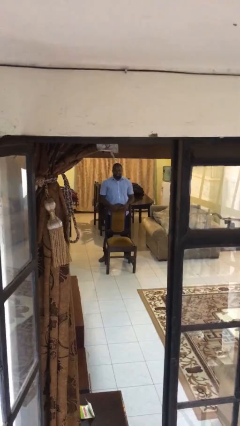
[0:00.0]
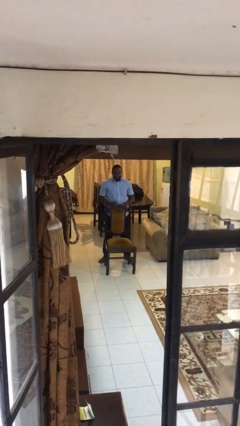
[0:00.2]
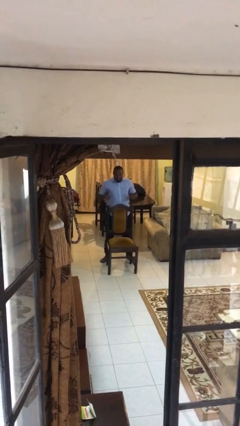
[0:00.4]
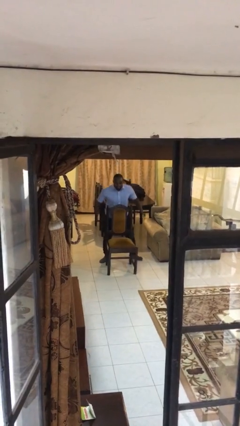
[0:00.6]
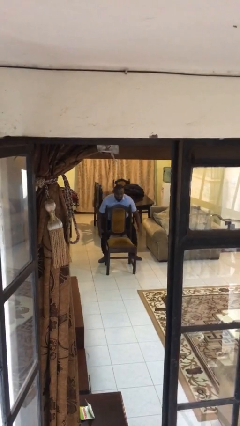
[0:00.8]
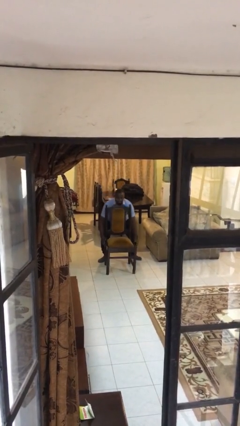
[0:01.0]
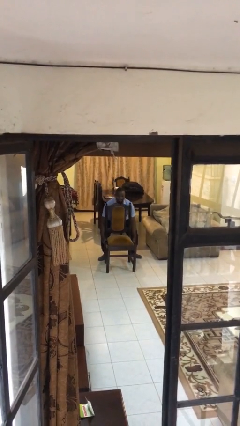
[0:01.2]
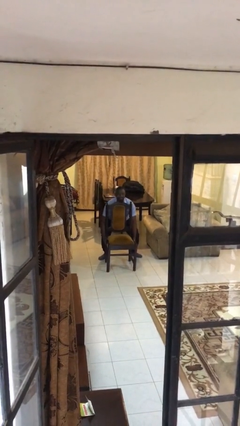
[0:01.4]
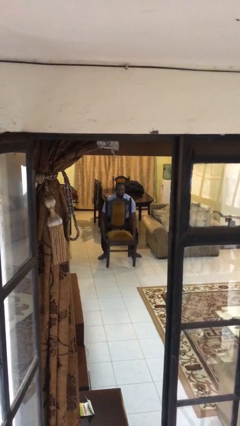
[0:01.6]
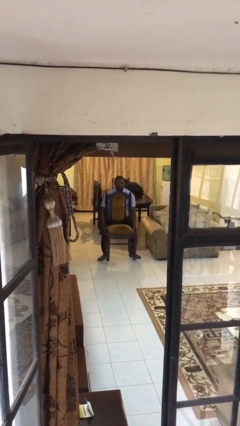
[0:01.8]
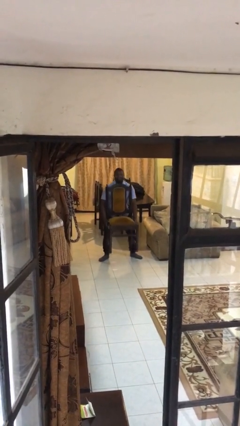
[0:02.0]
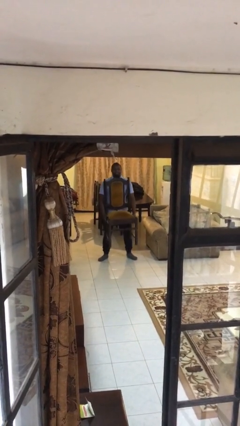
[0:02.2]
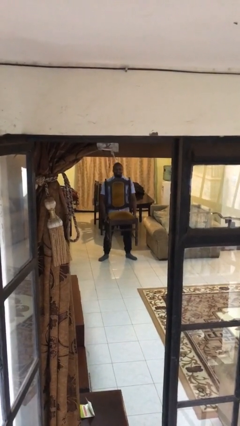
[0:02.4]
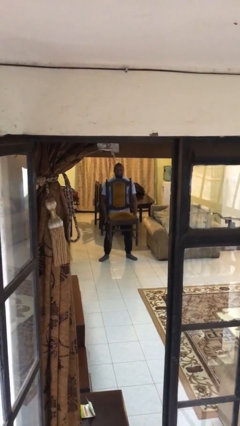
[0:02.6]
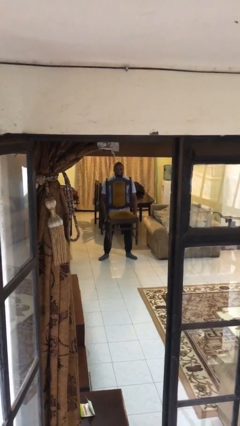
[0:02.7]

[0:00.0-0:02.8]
person picks up object from floor

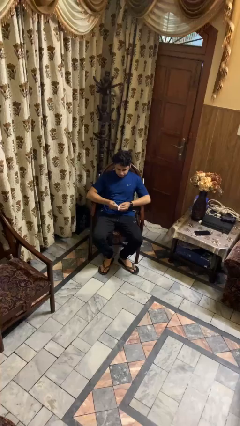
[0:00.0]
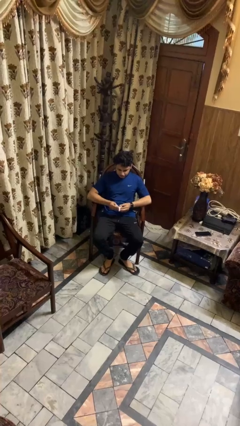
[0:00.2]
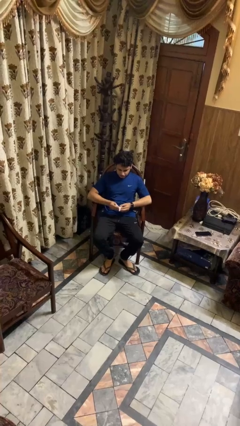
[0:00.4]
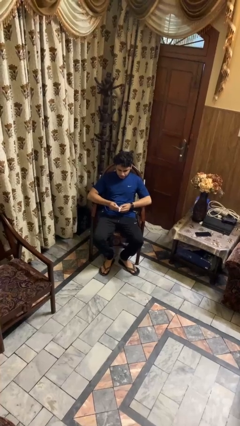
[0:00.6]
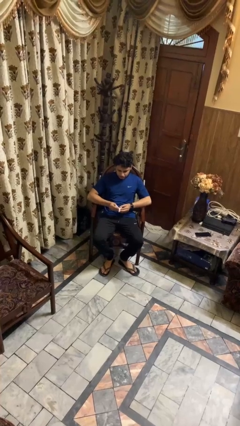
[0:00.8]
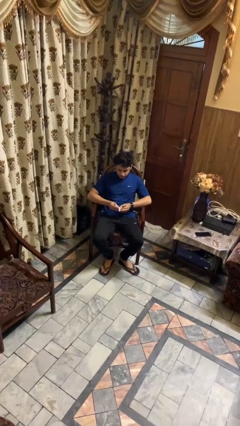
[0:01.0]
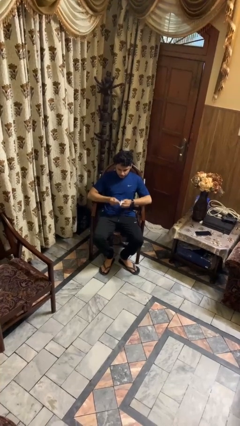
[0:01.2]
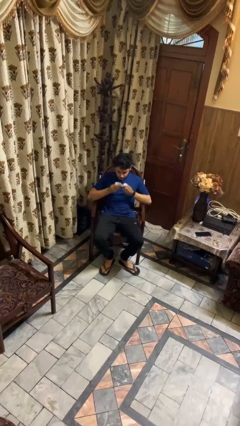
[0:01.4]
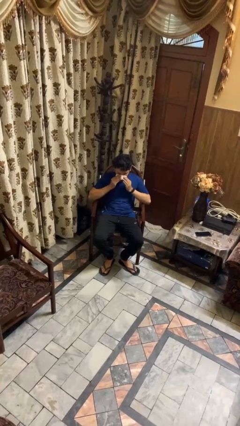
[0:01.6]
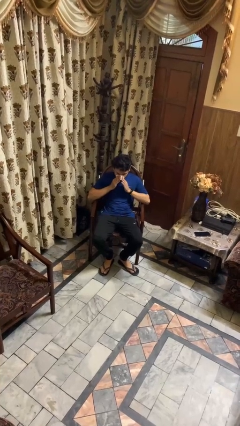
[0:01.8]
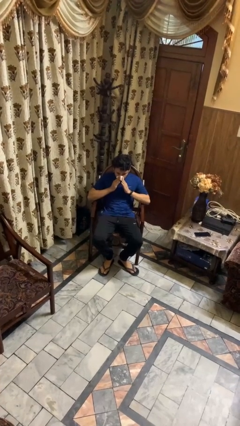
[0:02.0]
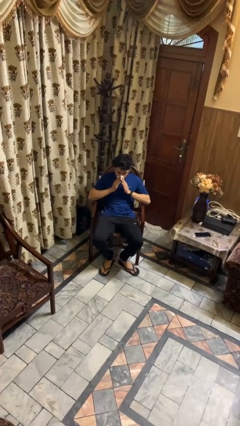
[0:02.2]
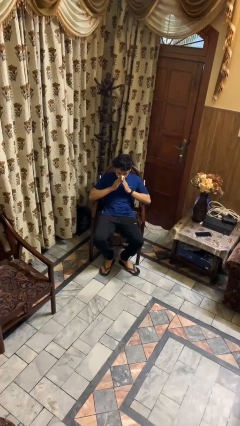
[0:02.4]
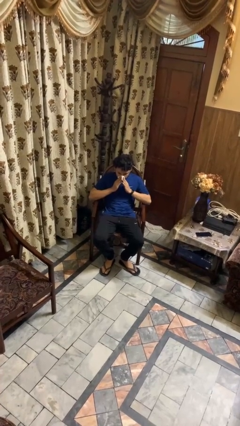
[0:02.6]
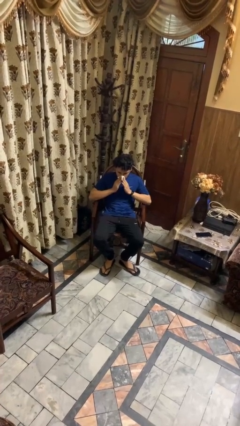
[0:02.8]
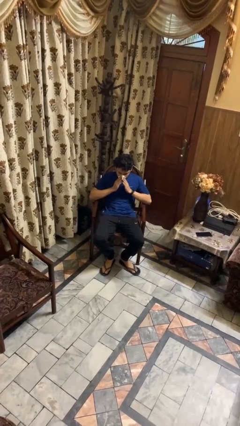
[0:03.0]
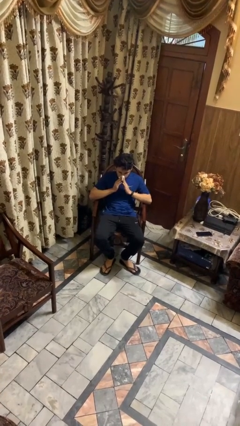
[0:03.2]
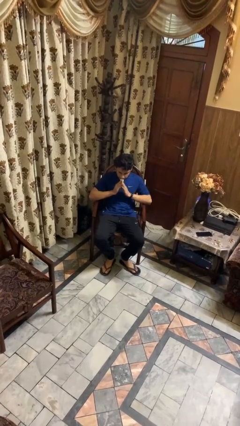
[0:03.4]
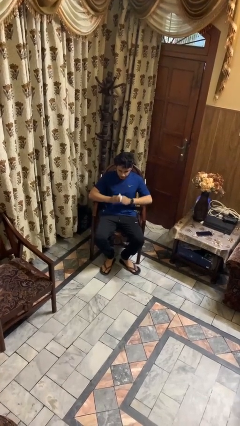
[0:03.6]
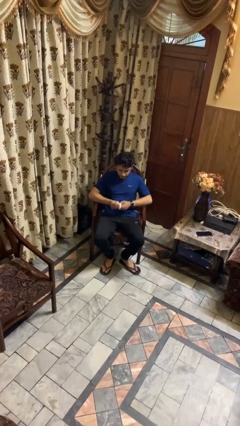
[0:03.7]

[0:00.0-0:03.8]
person blows nose

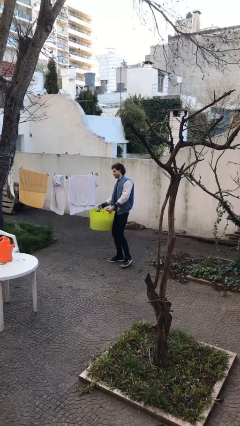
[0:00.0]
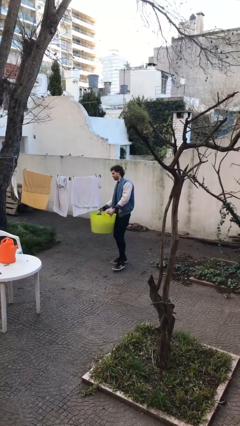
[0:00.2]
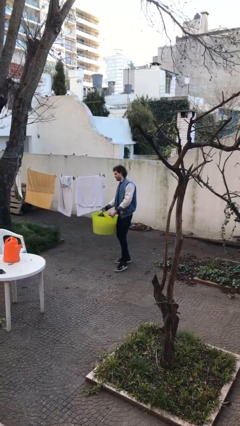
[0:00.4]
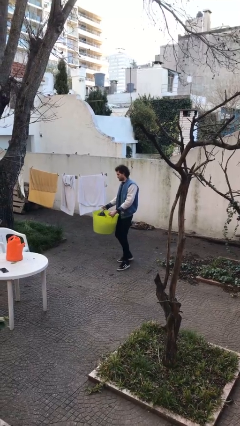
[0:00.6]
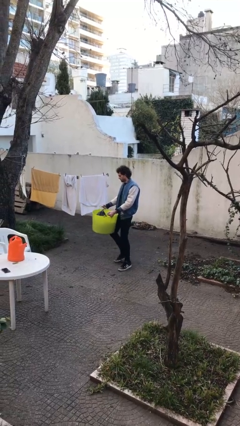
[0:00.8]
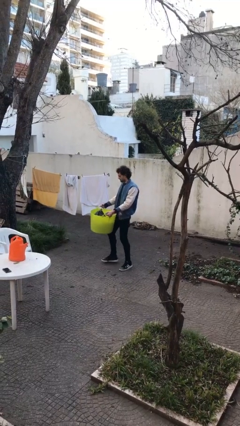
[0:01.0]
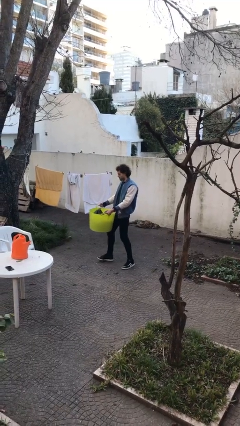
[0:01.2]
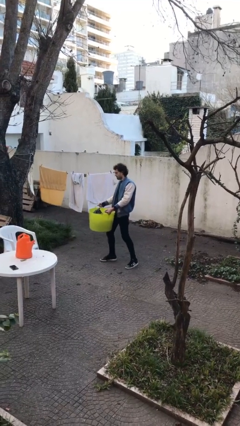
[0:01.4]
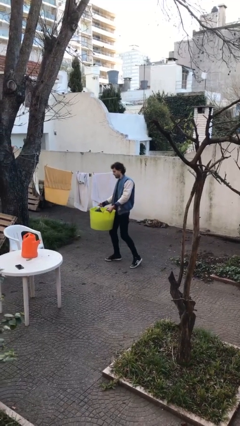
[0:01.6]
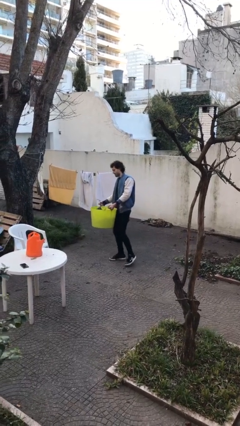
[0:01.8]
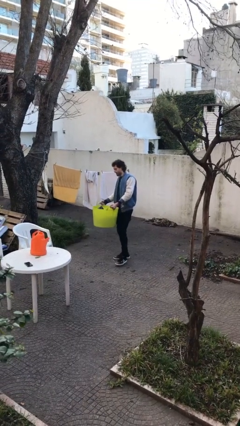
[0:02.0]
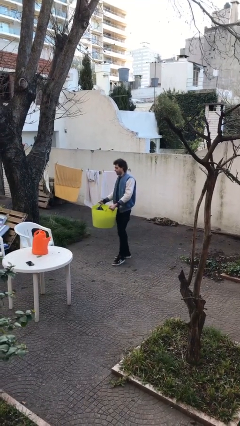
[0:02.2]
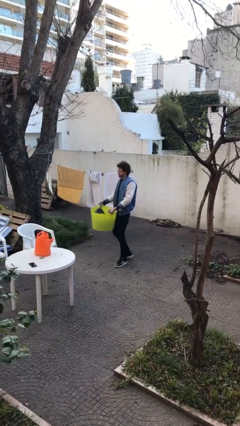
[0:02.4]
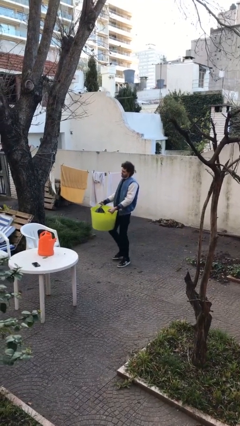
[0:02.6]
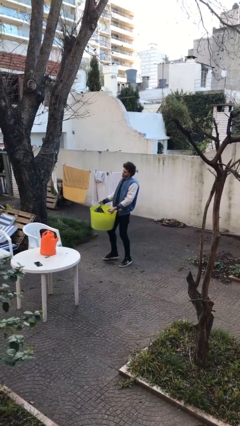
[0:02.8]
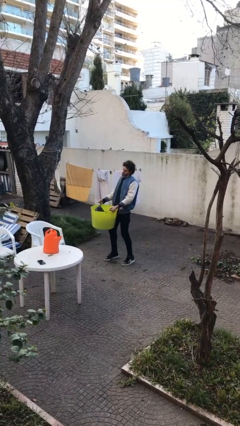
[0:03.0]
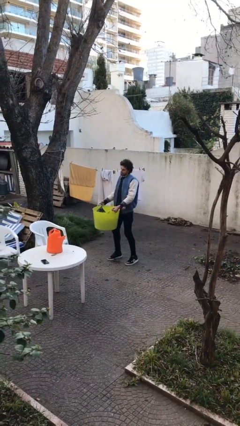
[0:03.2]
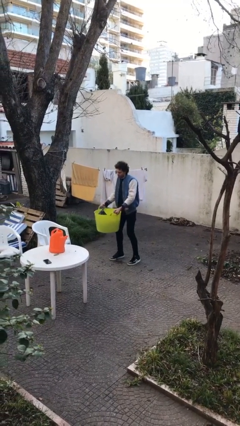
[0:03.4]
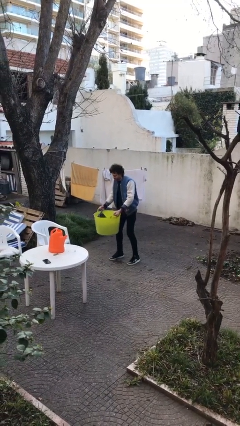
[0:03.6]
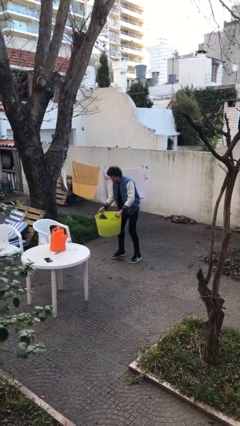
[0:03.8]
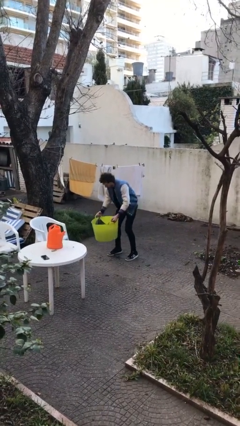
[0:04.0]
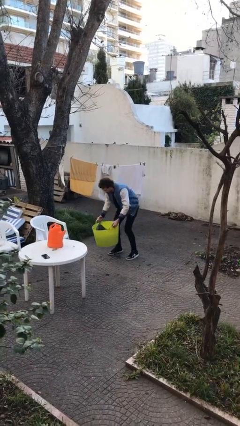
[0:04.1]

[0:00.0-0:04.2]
person carries heavy object

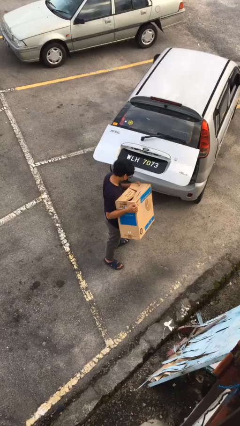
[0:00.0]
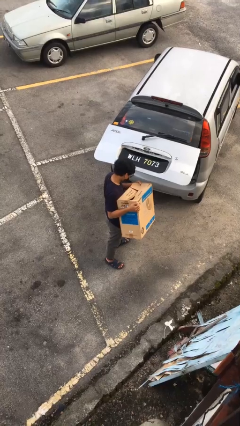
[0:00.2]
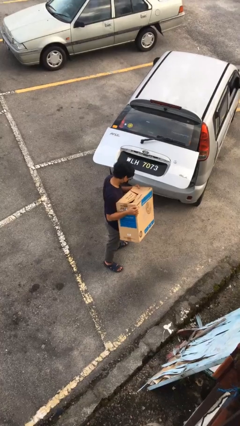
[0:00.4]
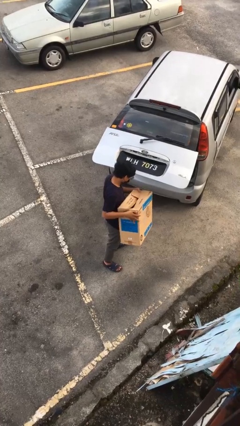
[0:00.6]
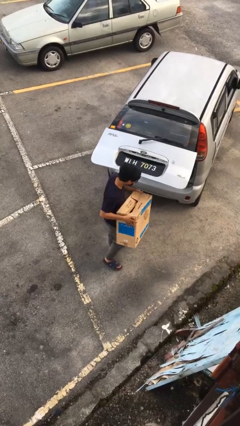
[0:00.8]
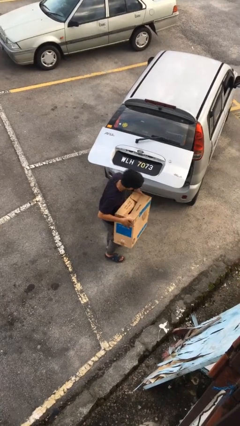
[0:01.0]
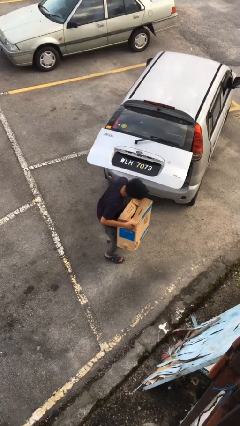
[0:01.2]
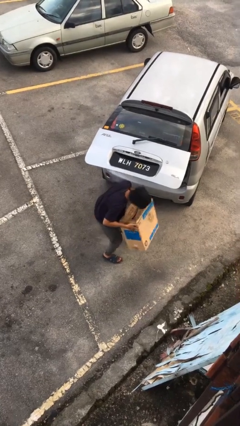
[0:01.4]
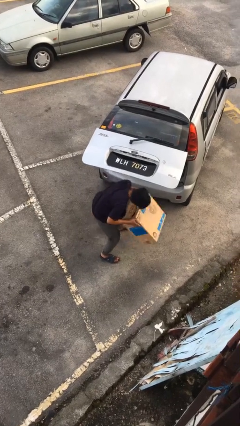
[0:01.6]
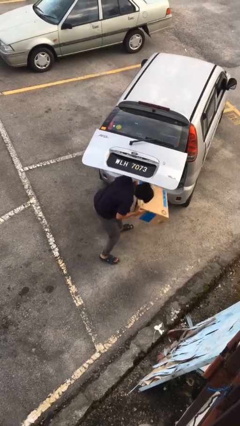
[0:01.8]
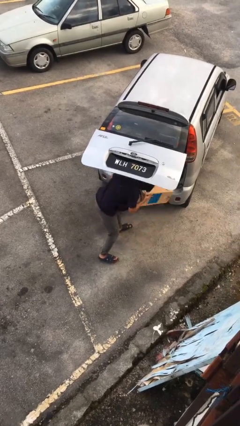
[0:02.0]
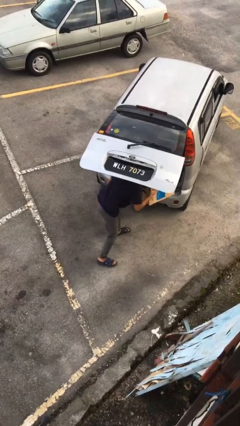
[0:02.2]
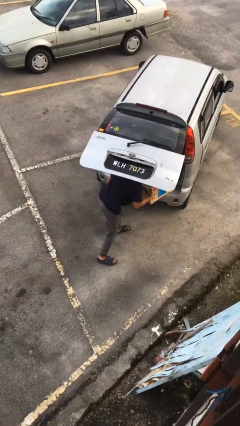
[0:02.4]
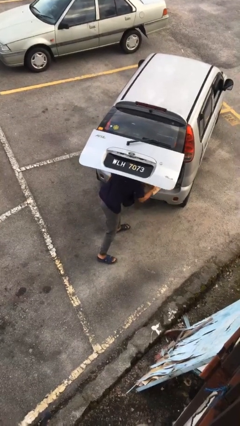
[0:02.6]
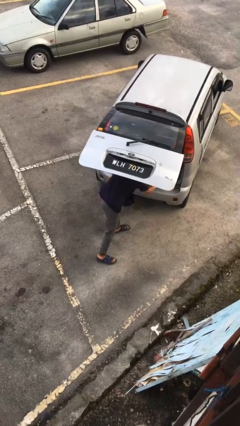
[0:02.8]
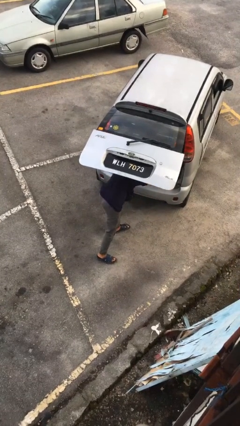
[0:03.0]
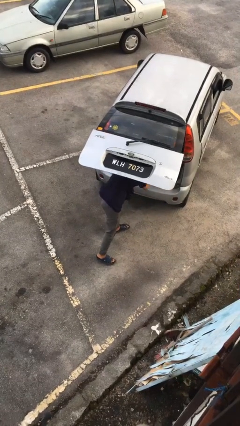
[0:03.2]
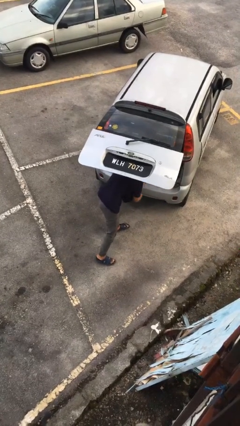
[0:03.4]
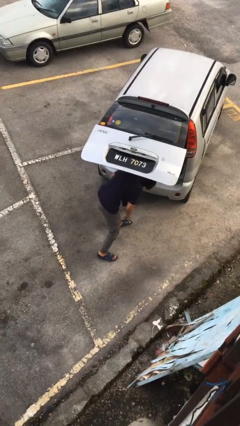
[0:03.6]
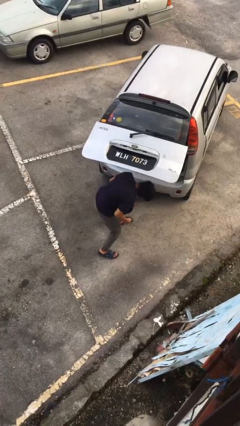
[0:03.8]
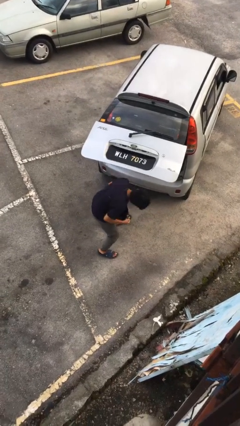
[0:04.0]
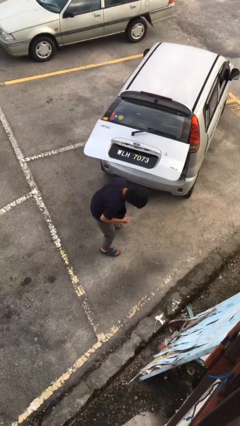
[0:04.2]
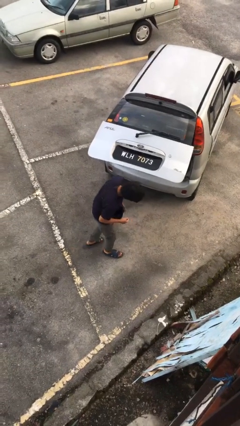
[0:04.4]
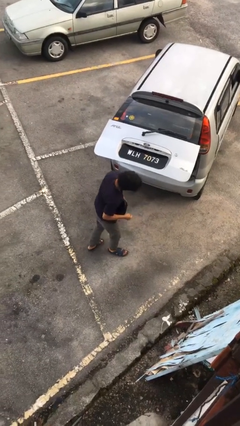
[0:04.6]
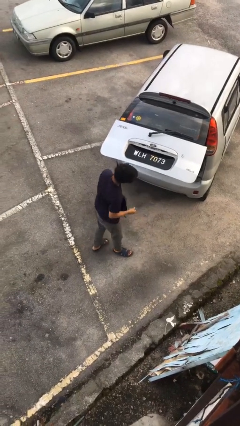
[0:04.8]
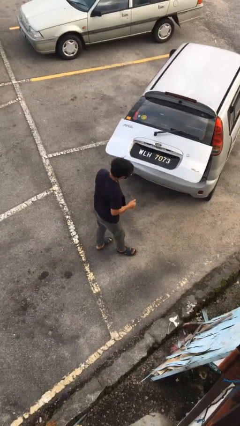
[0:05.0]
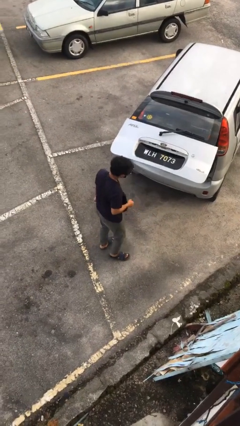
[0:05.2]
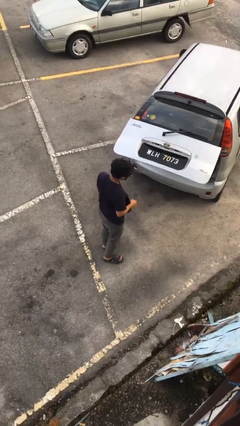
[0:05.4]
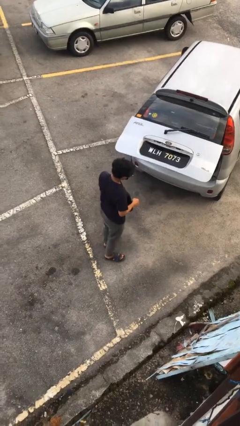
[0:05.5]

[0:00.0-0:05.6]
person loads car

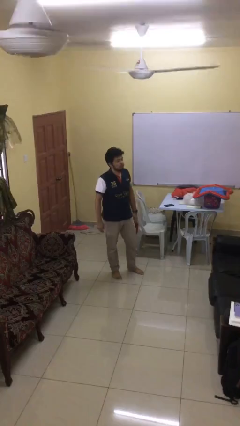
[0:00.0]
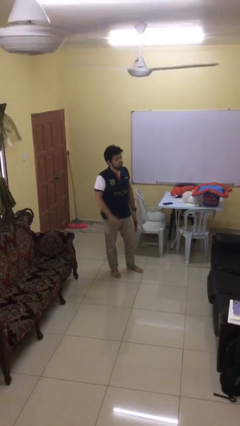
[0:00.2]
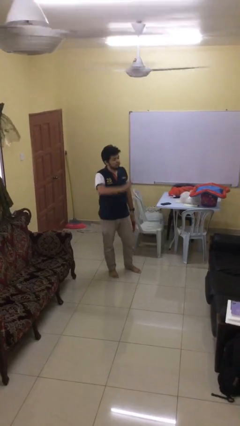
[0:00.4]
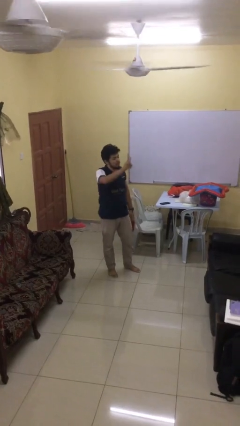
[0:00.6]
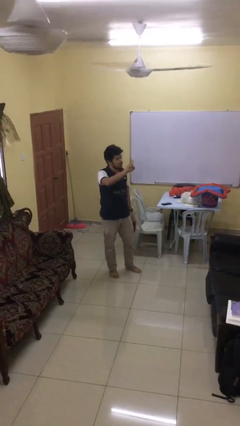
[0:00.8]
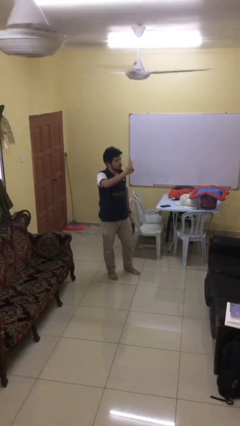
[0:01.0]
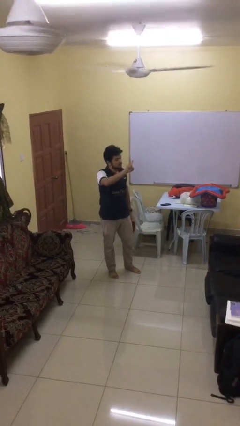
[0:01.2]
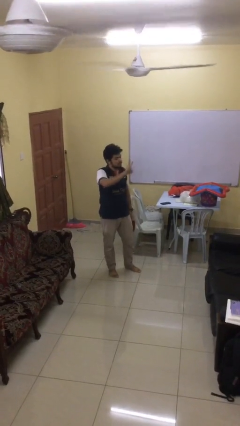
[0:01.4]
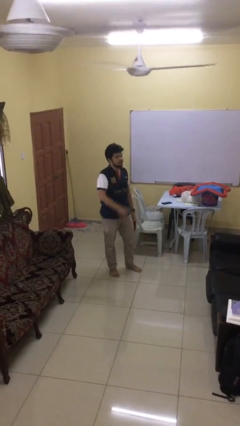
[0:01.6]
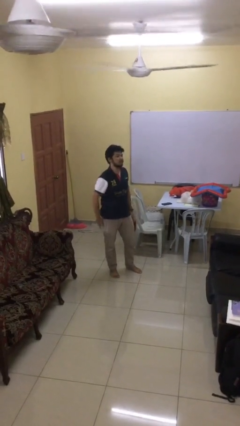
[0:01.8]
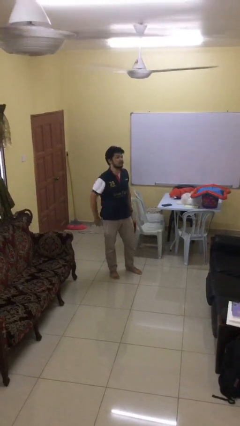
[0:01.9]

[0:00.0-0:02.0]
person gestures peace
